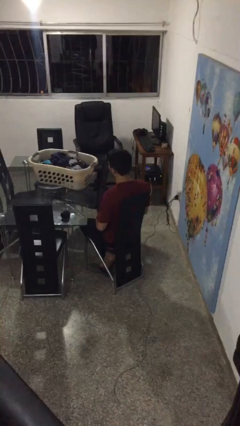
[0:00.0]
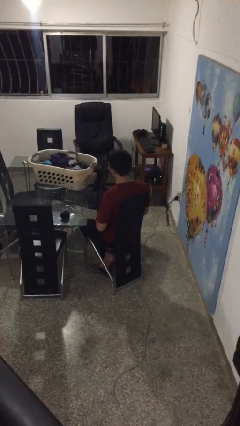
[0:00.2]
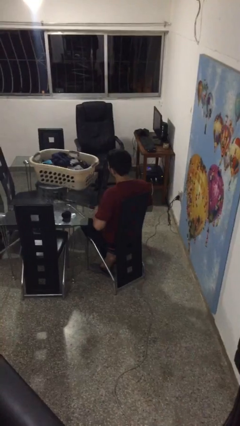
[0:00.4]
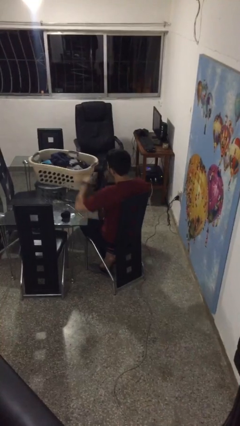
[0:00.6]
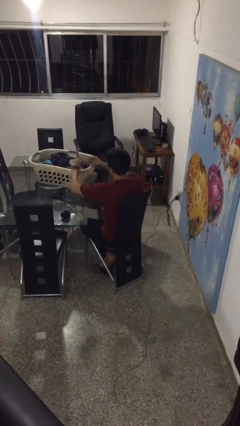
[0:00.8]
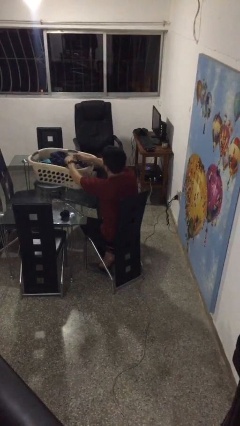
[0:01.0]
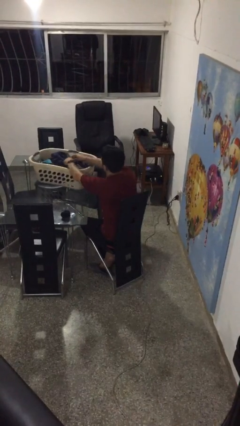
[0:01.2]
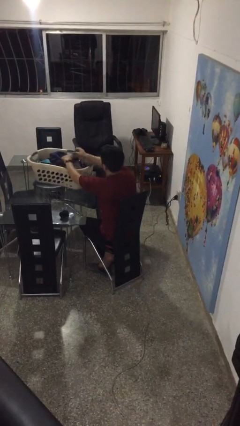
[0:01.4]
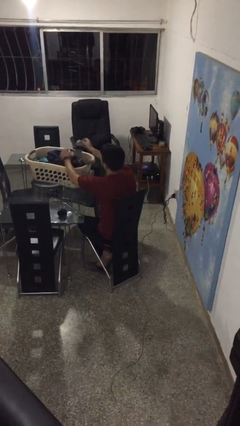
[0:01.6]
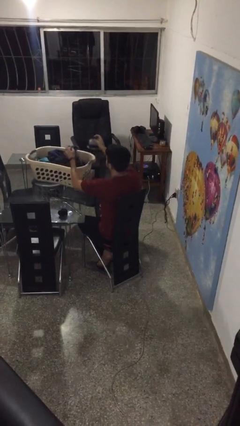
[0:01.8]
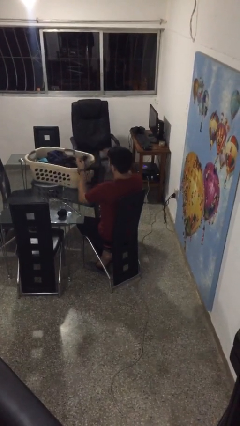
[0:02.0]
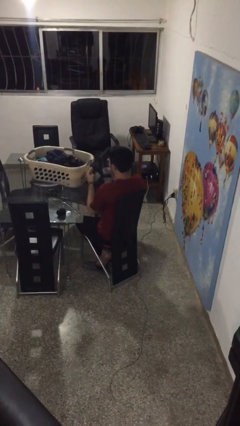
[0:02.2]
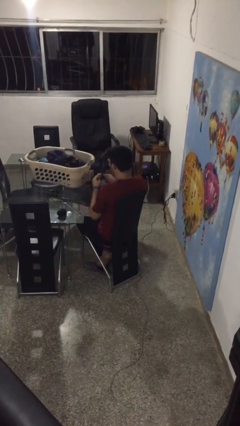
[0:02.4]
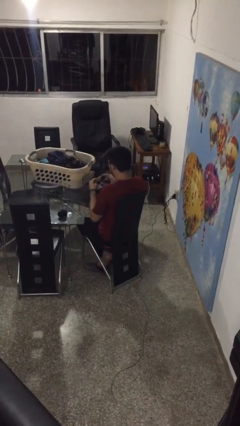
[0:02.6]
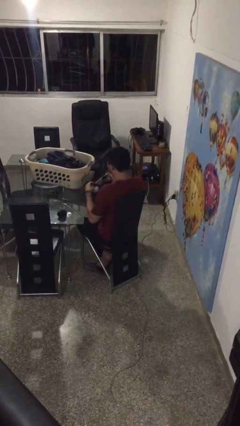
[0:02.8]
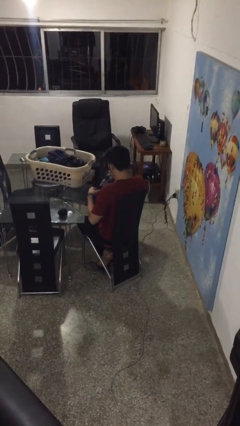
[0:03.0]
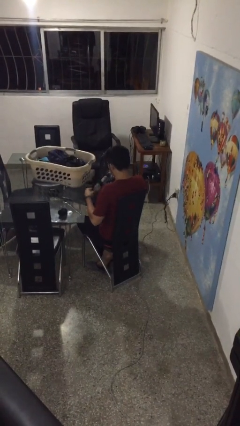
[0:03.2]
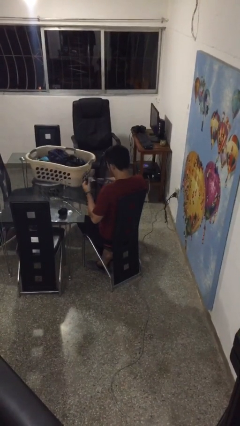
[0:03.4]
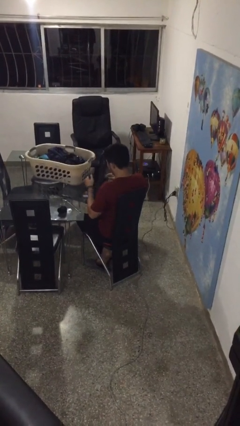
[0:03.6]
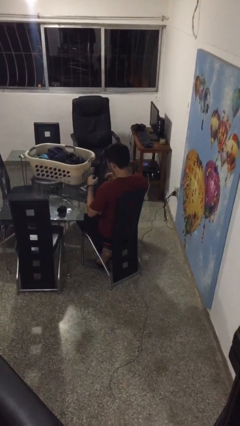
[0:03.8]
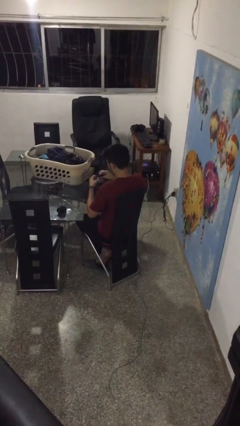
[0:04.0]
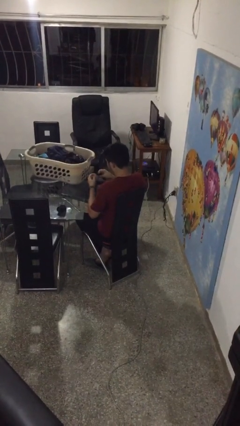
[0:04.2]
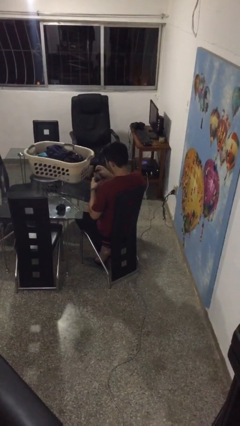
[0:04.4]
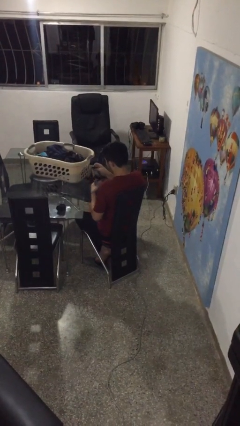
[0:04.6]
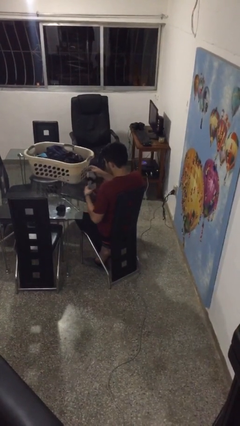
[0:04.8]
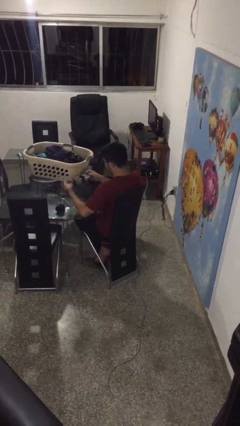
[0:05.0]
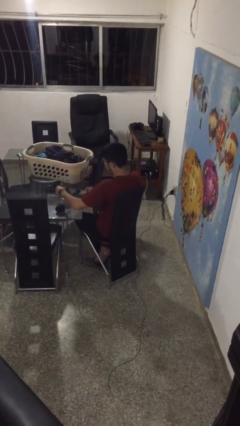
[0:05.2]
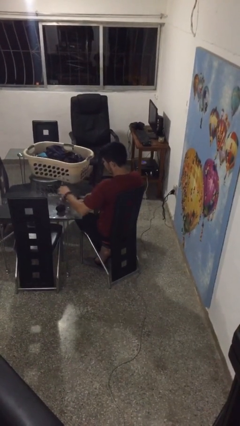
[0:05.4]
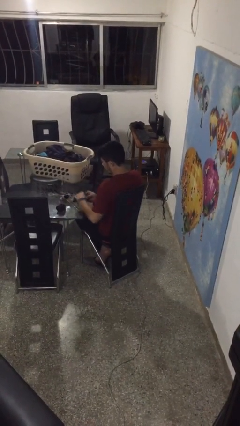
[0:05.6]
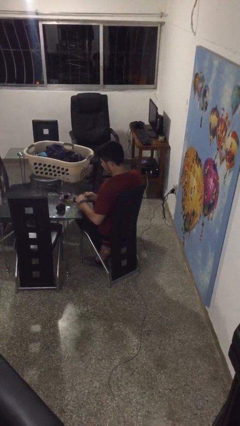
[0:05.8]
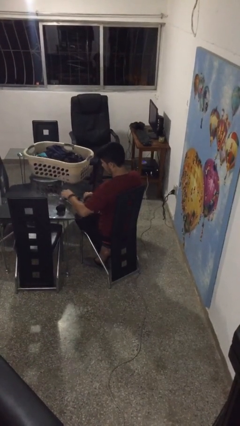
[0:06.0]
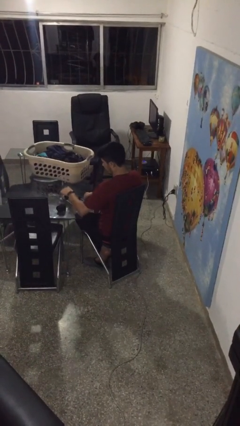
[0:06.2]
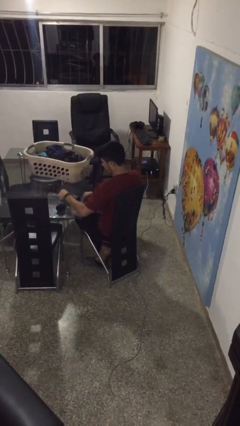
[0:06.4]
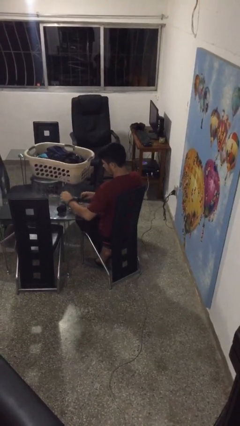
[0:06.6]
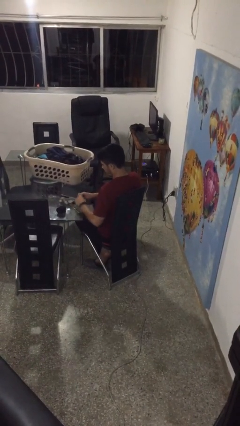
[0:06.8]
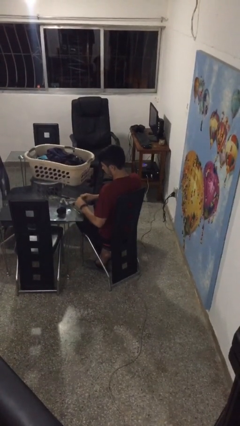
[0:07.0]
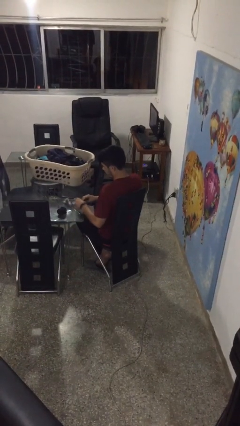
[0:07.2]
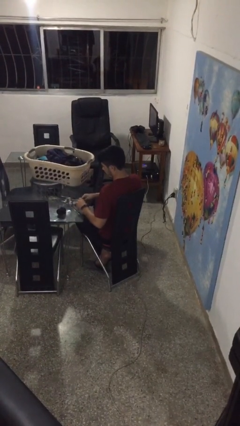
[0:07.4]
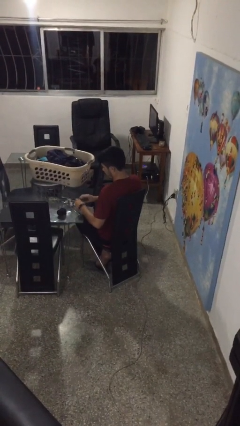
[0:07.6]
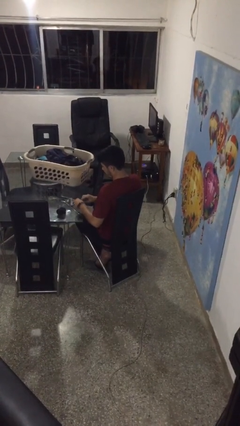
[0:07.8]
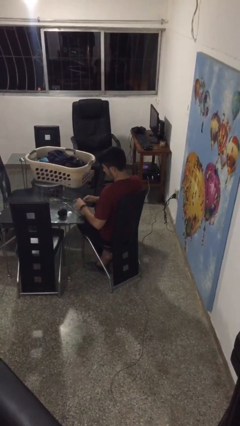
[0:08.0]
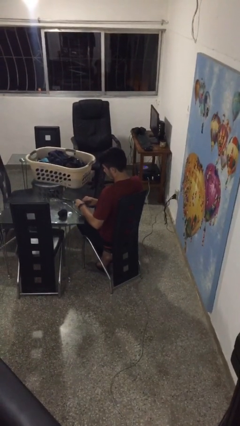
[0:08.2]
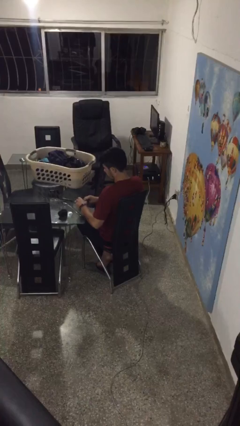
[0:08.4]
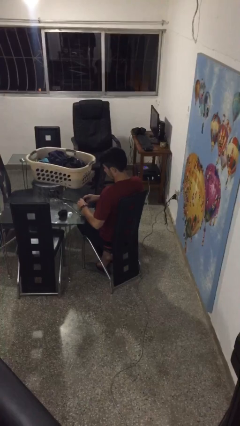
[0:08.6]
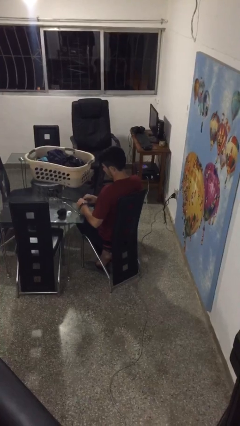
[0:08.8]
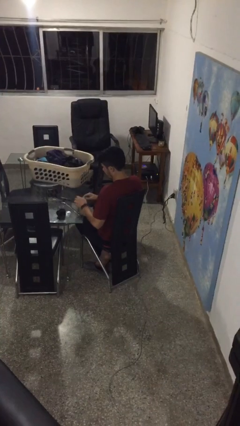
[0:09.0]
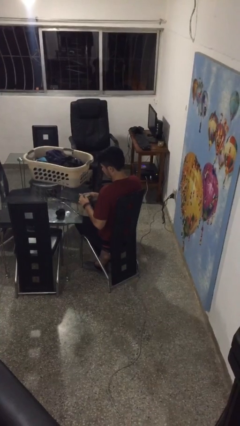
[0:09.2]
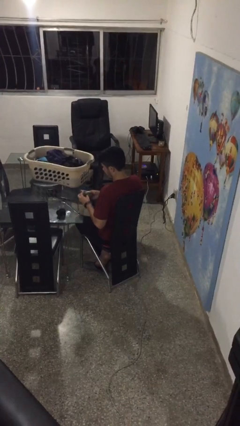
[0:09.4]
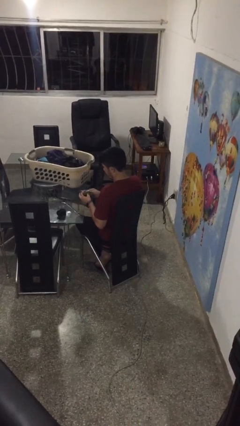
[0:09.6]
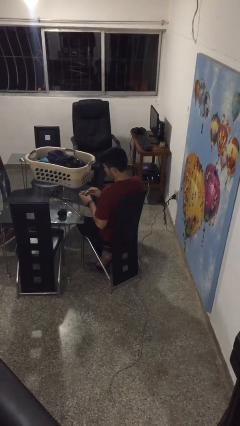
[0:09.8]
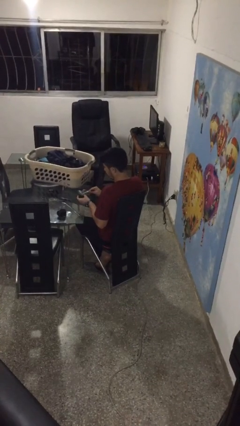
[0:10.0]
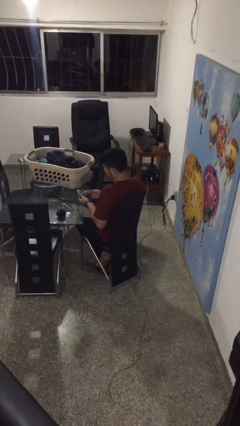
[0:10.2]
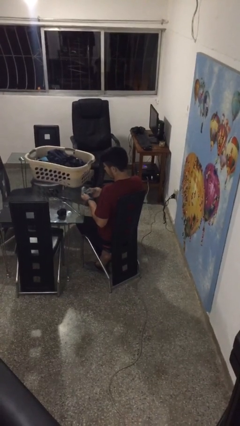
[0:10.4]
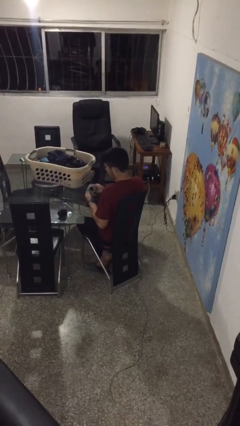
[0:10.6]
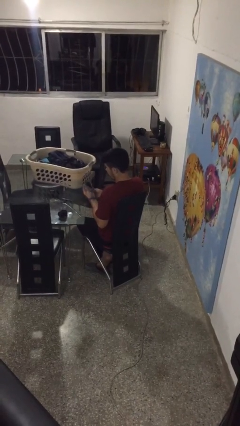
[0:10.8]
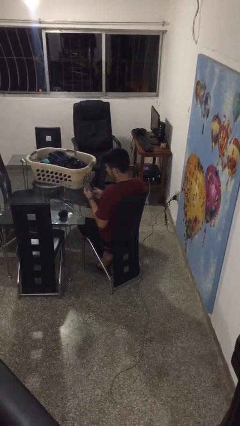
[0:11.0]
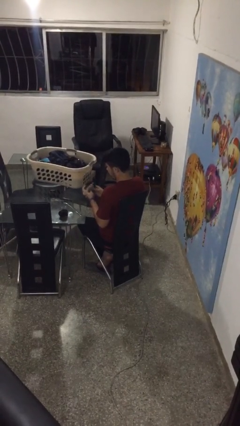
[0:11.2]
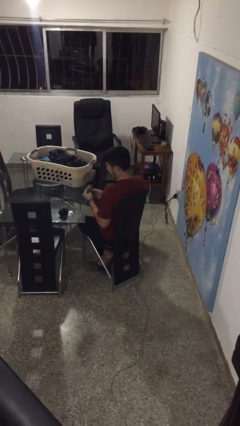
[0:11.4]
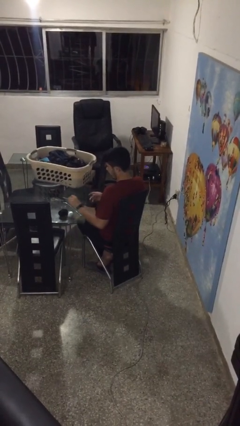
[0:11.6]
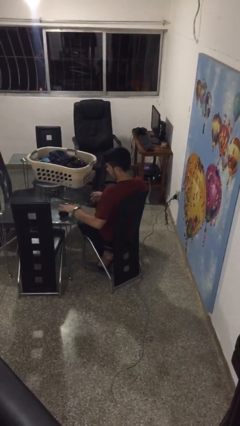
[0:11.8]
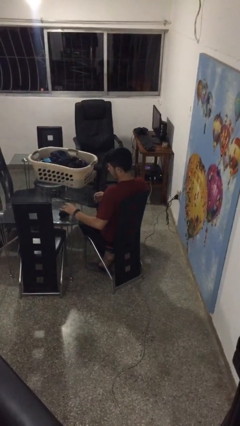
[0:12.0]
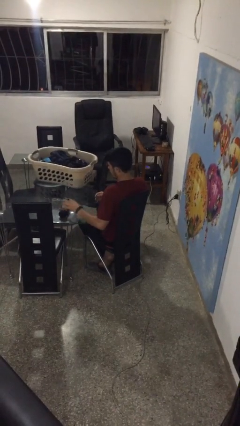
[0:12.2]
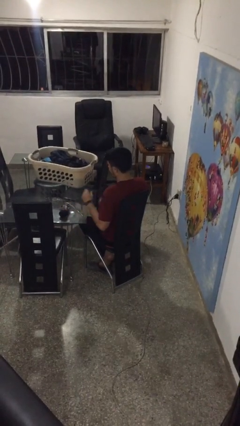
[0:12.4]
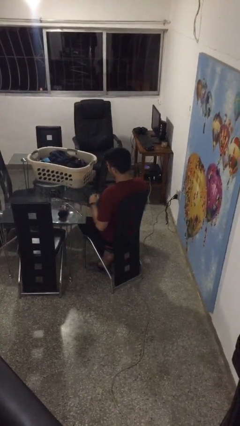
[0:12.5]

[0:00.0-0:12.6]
person folds socks

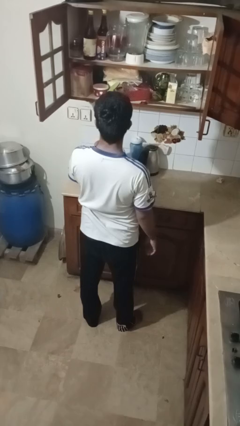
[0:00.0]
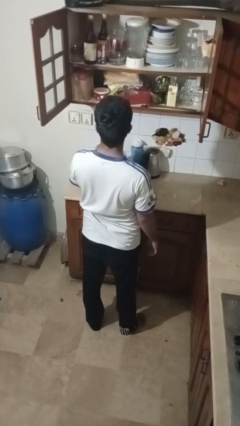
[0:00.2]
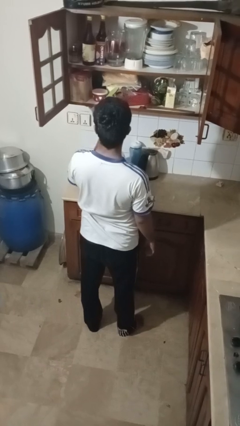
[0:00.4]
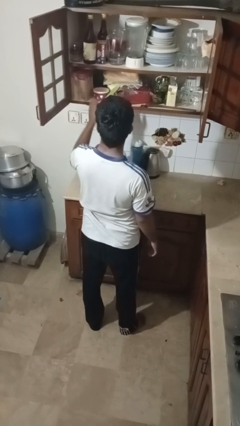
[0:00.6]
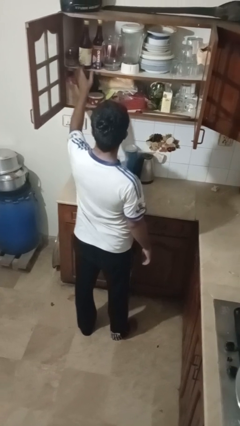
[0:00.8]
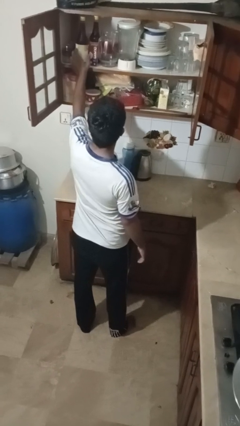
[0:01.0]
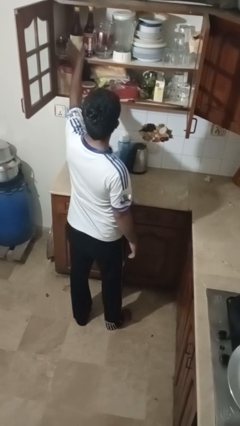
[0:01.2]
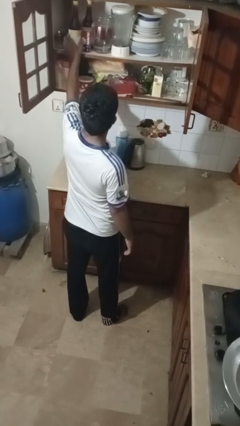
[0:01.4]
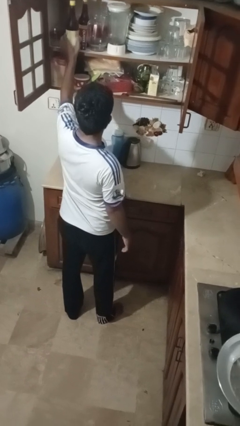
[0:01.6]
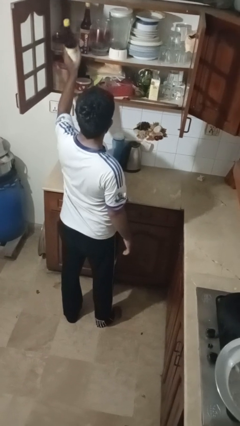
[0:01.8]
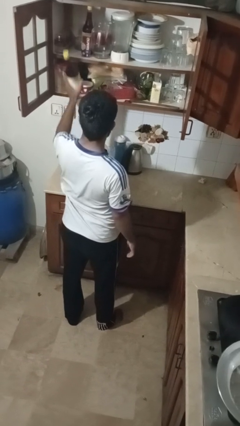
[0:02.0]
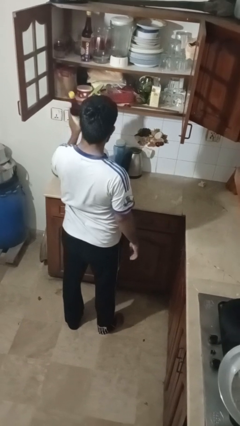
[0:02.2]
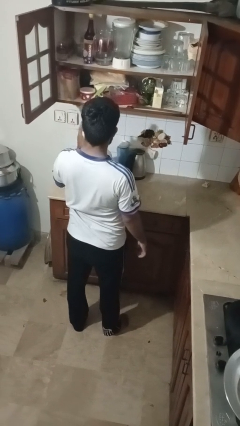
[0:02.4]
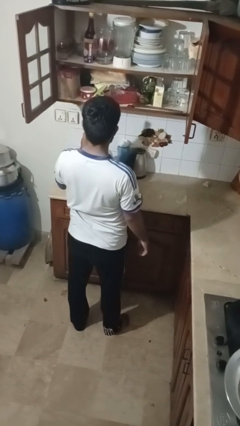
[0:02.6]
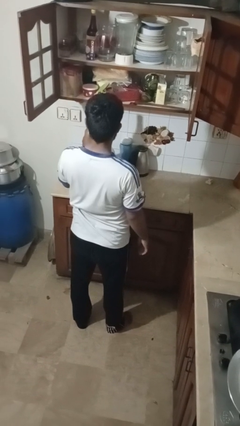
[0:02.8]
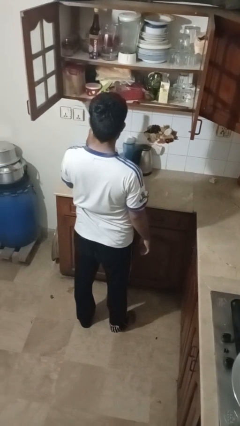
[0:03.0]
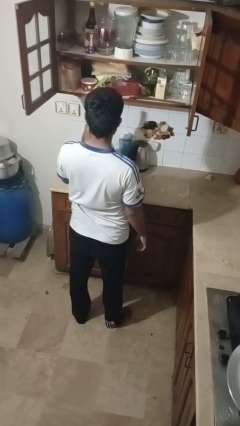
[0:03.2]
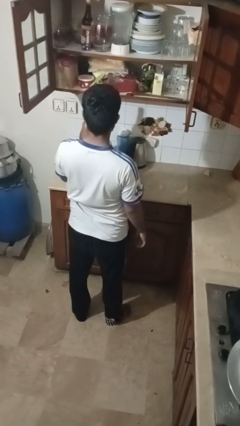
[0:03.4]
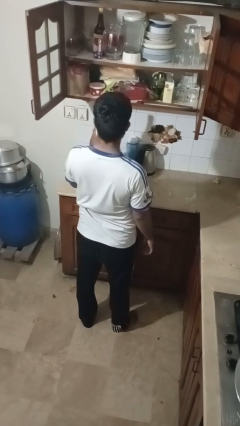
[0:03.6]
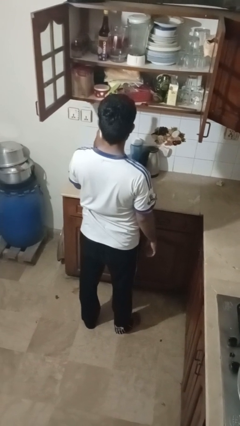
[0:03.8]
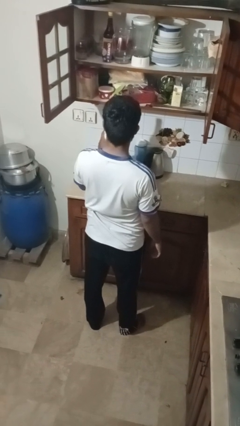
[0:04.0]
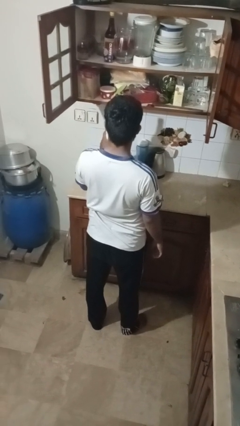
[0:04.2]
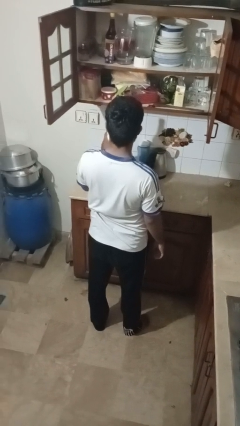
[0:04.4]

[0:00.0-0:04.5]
person takes object from cabinet

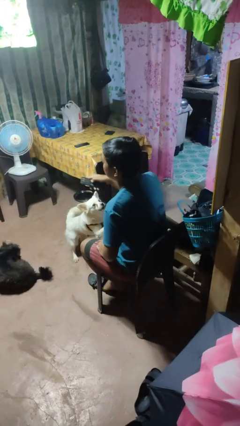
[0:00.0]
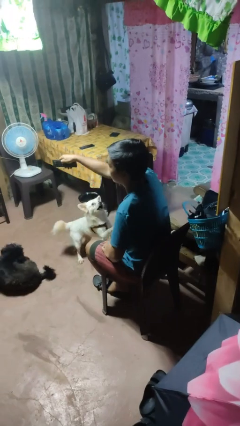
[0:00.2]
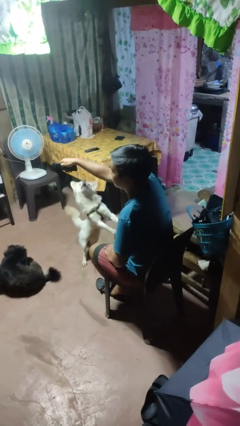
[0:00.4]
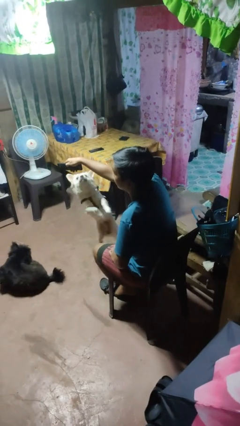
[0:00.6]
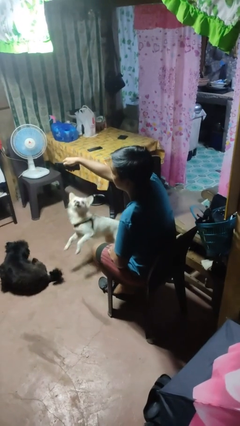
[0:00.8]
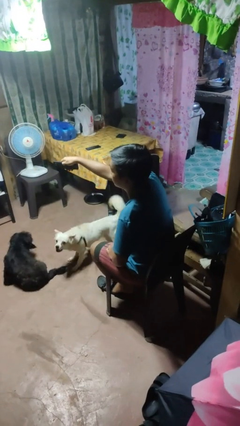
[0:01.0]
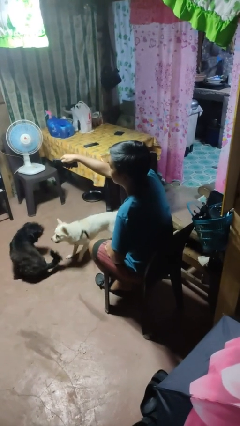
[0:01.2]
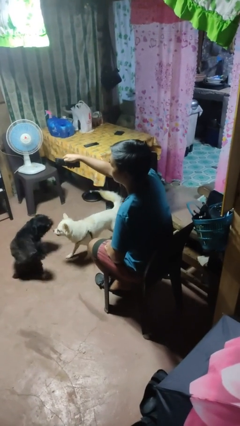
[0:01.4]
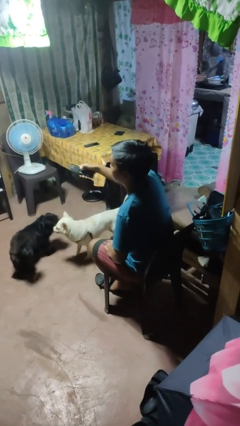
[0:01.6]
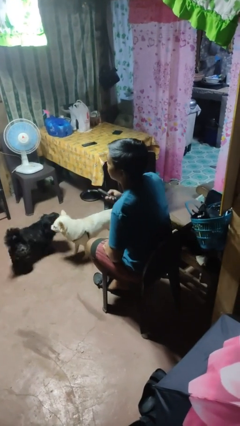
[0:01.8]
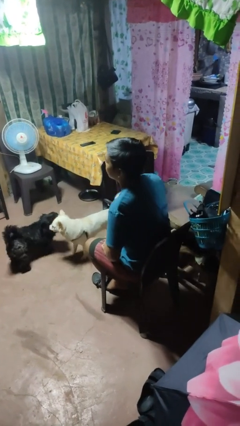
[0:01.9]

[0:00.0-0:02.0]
person uses television remote
